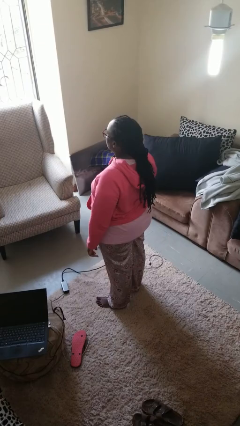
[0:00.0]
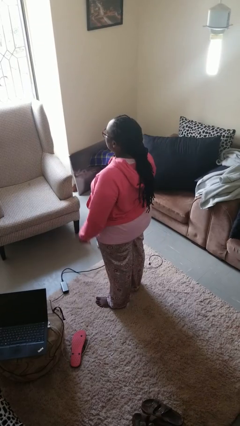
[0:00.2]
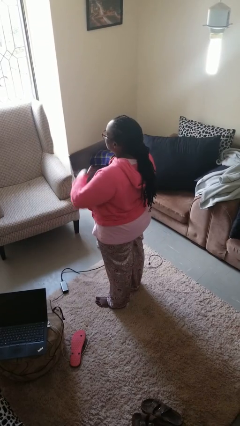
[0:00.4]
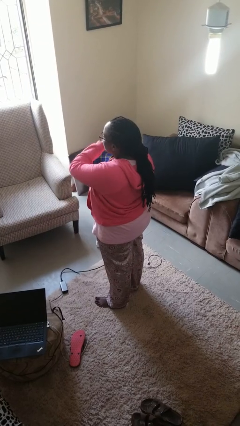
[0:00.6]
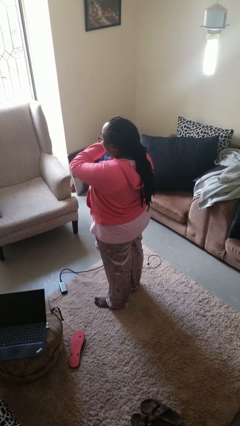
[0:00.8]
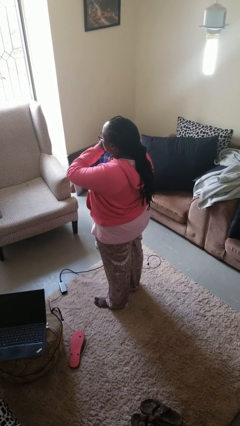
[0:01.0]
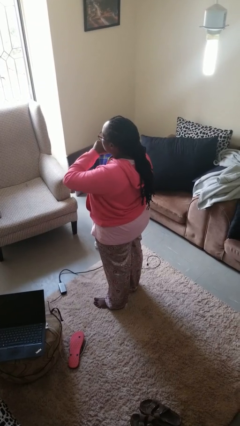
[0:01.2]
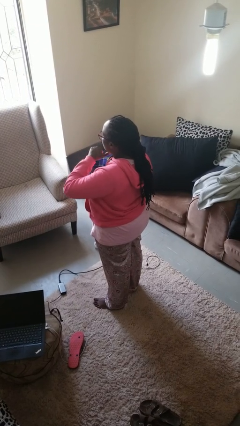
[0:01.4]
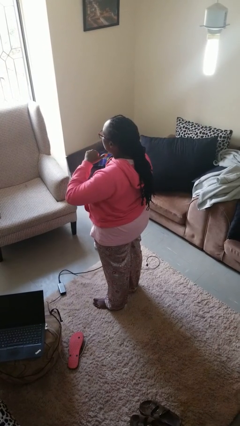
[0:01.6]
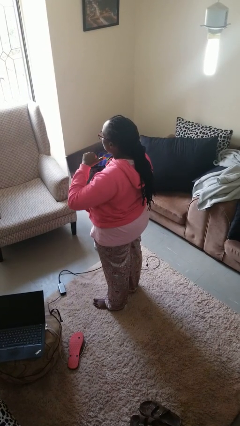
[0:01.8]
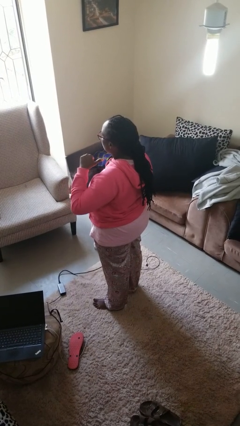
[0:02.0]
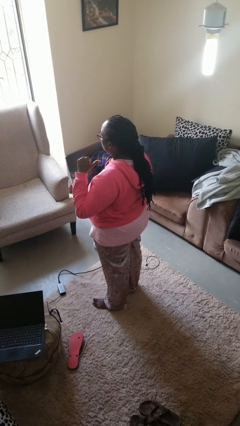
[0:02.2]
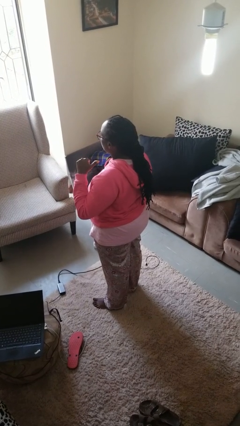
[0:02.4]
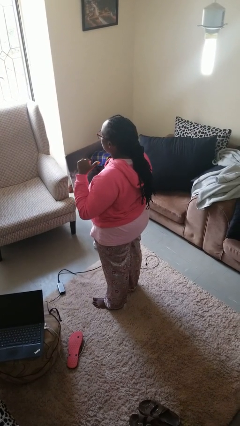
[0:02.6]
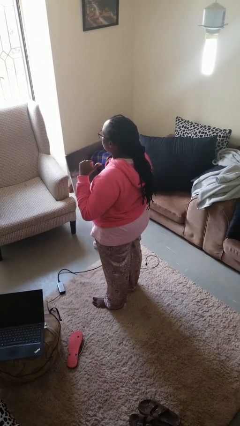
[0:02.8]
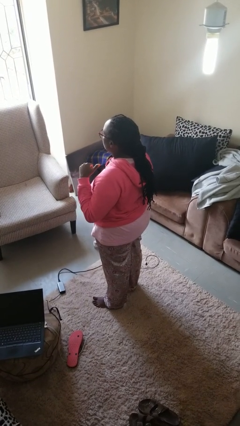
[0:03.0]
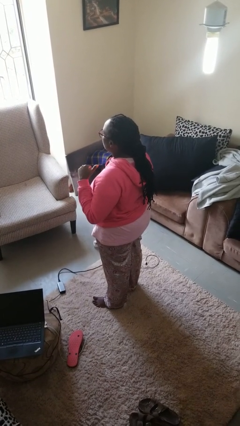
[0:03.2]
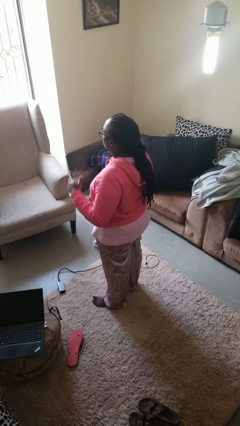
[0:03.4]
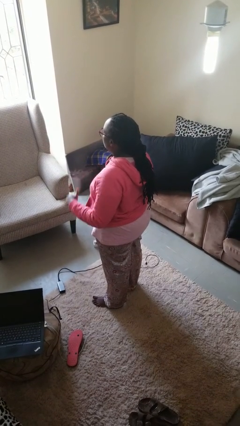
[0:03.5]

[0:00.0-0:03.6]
person gestures cut

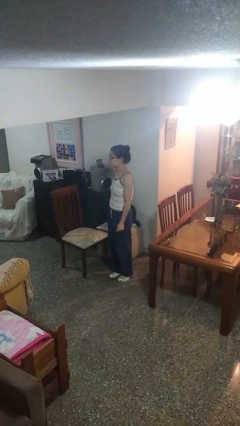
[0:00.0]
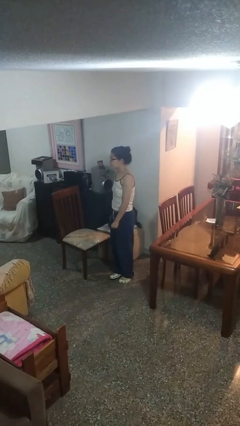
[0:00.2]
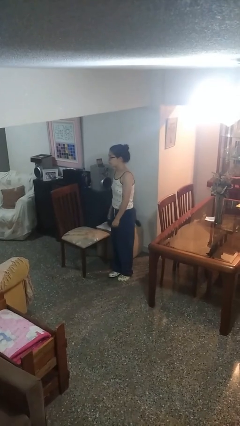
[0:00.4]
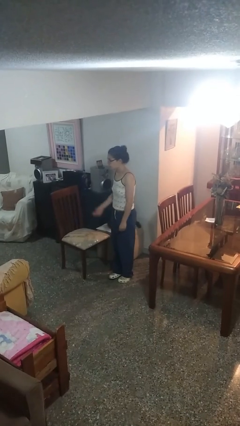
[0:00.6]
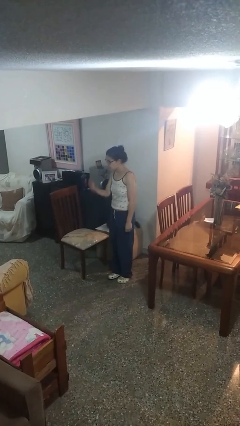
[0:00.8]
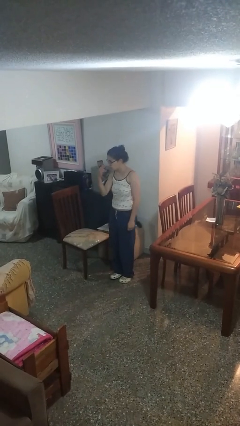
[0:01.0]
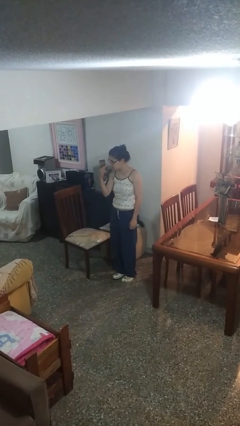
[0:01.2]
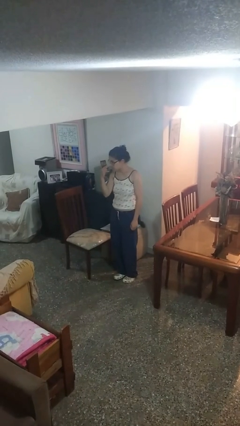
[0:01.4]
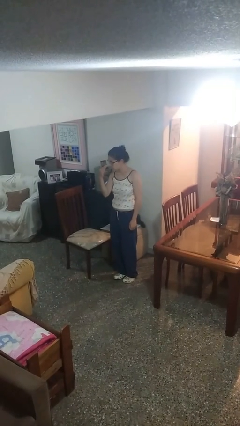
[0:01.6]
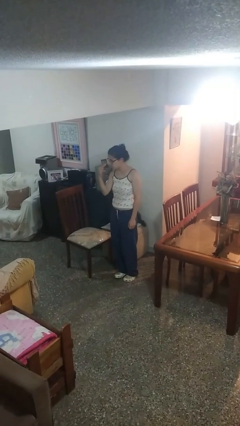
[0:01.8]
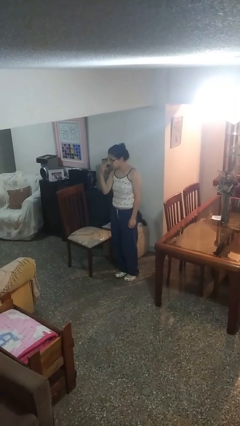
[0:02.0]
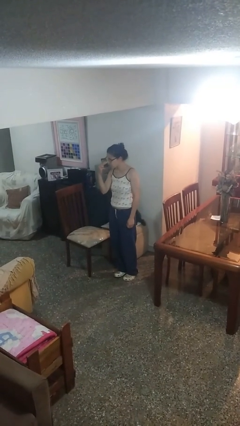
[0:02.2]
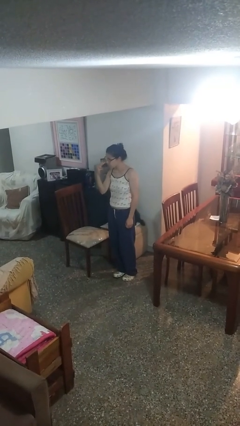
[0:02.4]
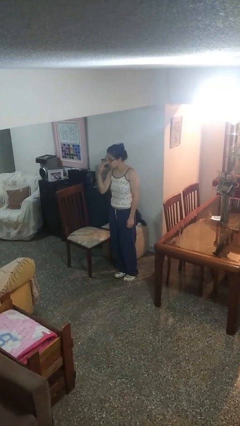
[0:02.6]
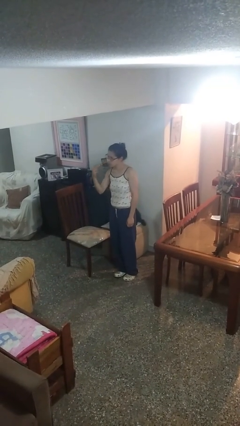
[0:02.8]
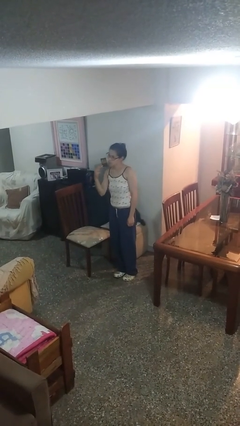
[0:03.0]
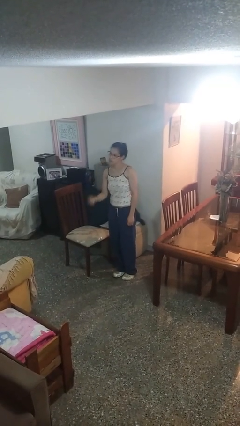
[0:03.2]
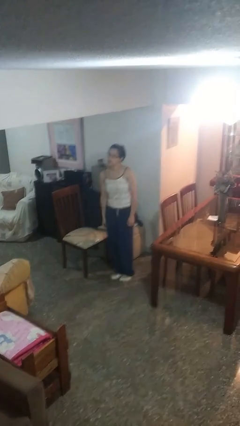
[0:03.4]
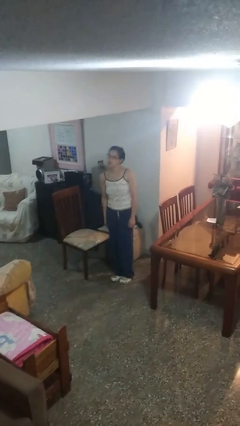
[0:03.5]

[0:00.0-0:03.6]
person gestures watch closely

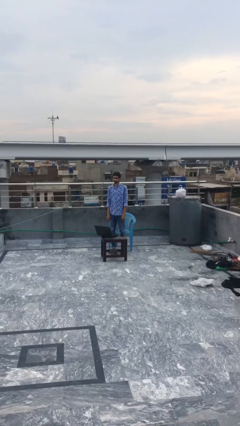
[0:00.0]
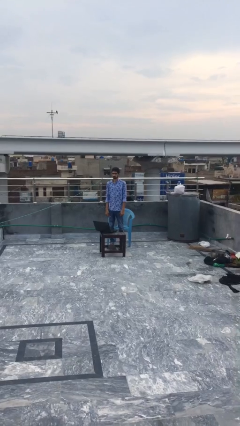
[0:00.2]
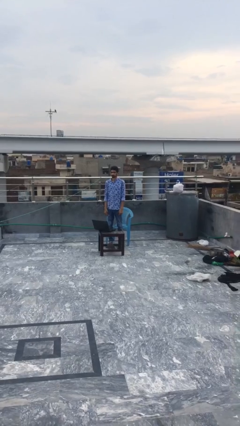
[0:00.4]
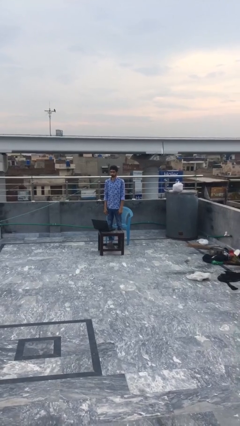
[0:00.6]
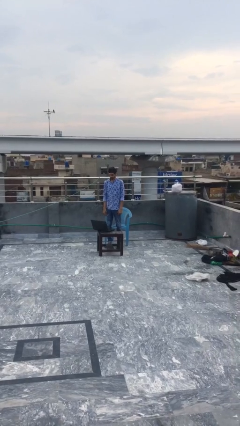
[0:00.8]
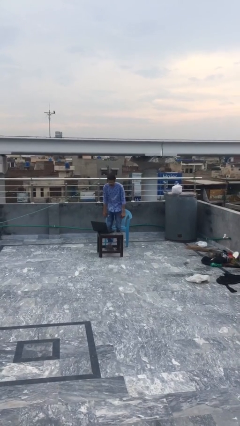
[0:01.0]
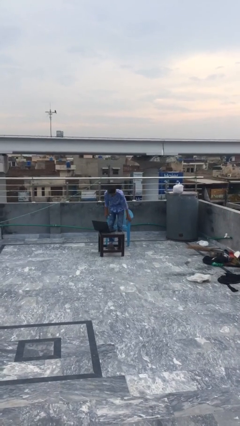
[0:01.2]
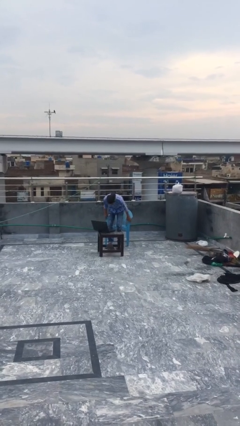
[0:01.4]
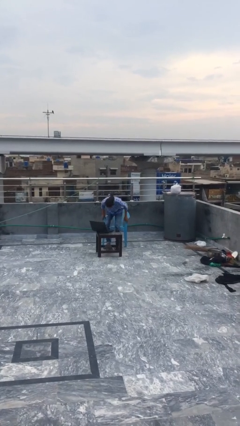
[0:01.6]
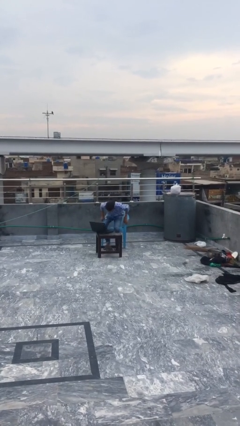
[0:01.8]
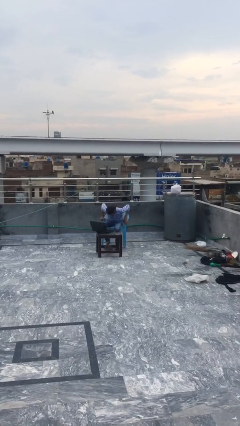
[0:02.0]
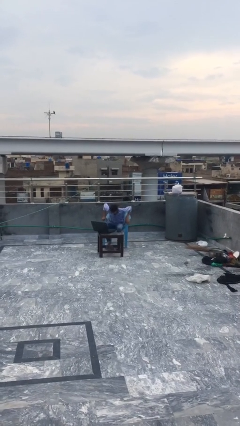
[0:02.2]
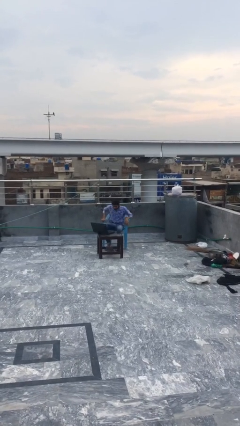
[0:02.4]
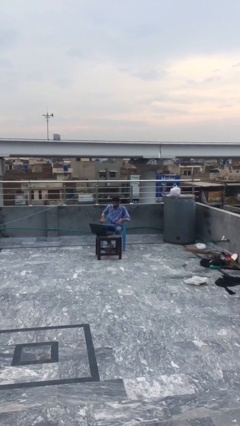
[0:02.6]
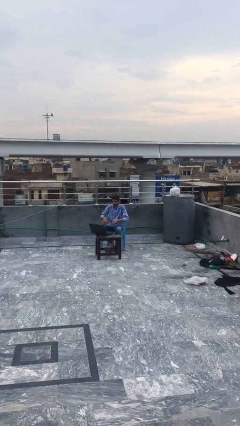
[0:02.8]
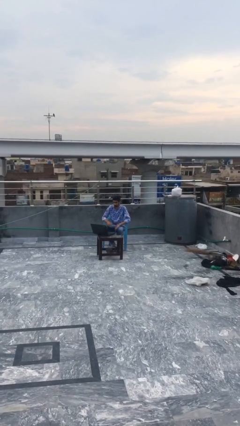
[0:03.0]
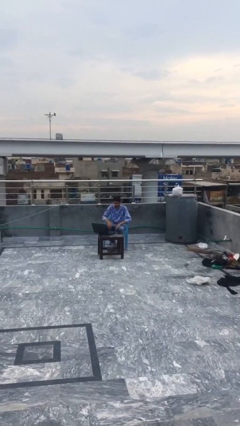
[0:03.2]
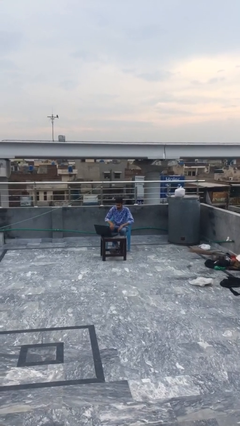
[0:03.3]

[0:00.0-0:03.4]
person sits down

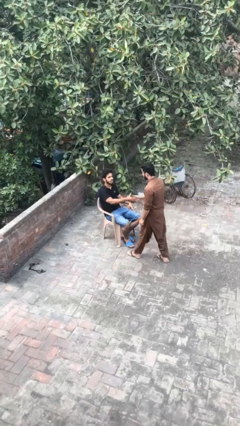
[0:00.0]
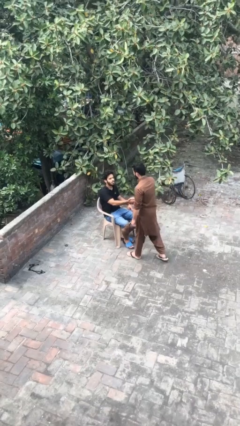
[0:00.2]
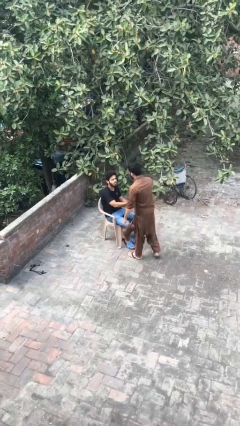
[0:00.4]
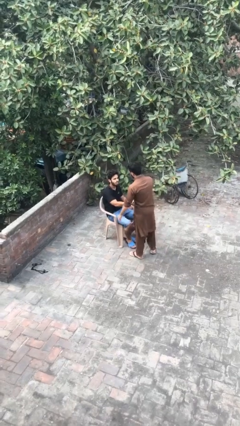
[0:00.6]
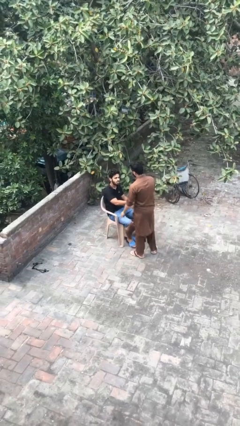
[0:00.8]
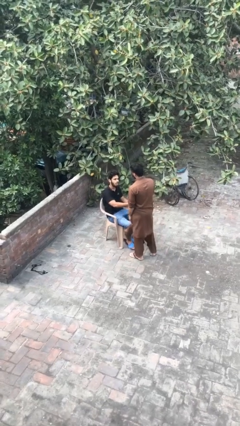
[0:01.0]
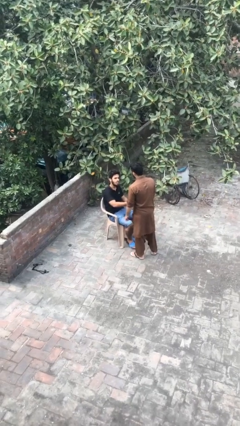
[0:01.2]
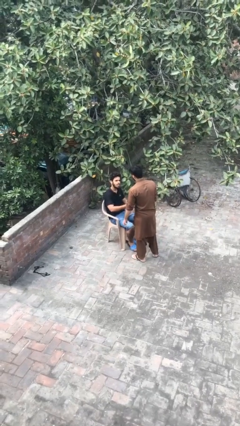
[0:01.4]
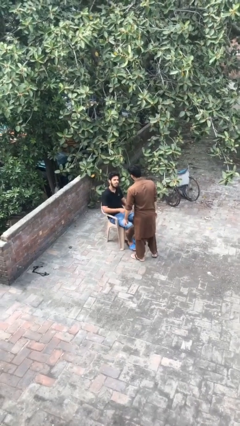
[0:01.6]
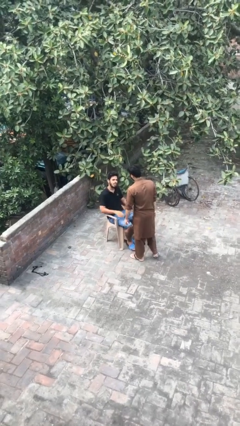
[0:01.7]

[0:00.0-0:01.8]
person shakes hand

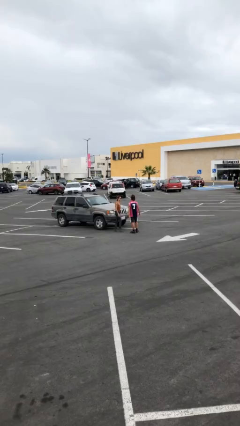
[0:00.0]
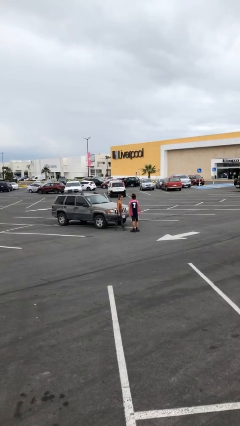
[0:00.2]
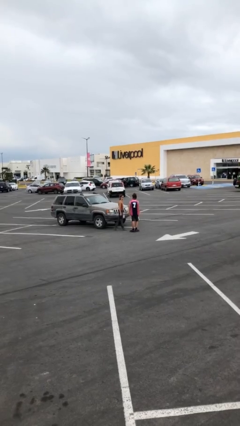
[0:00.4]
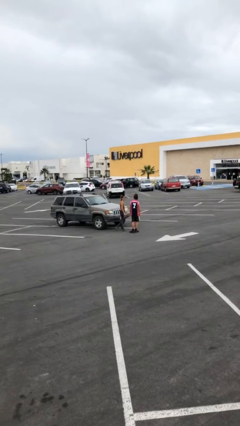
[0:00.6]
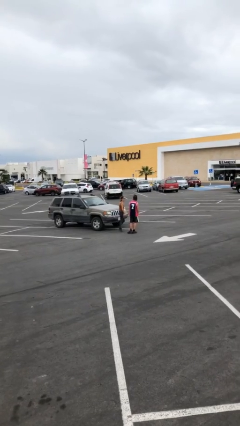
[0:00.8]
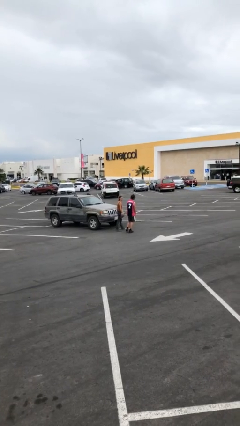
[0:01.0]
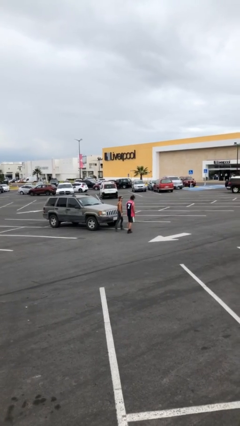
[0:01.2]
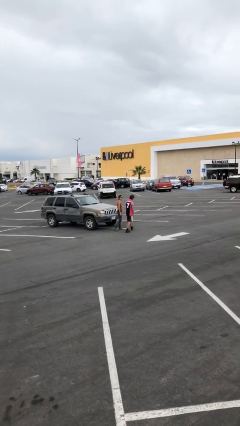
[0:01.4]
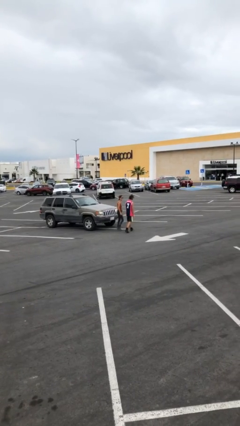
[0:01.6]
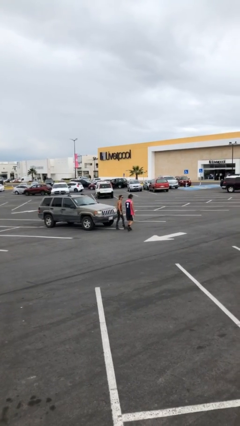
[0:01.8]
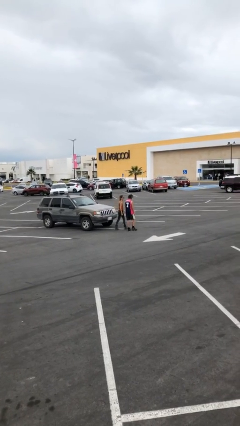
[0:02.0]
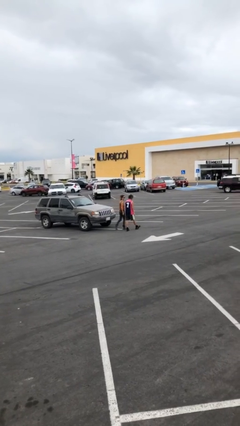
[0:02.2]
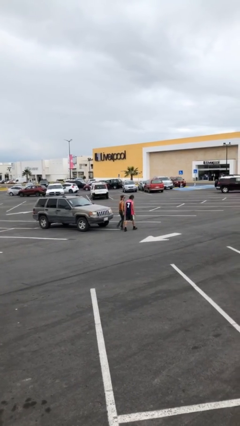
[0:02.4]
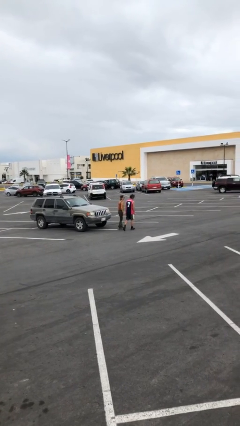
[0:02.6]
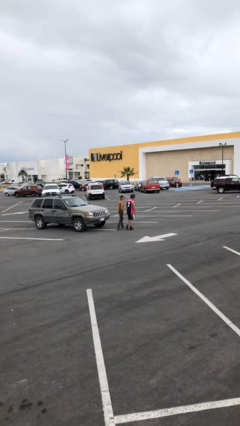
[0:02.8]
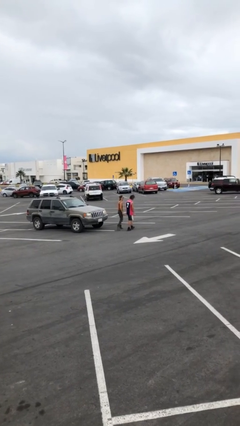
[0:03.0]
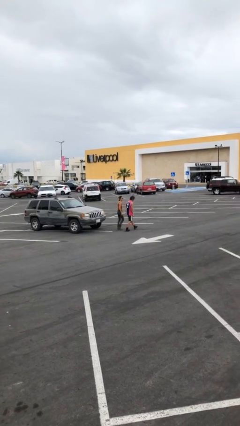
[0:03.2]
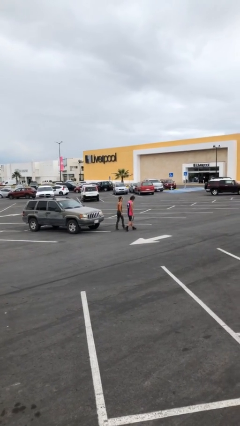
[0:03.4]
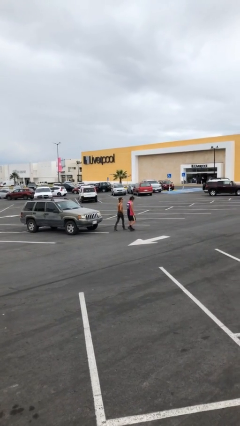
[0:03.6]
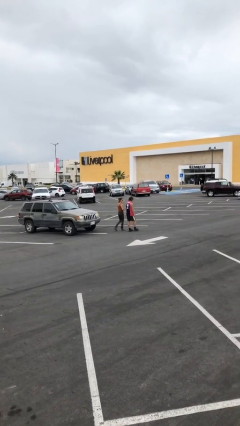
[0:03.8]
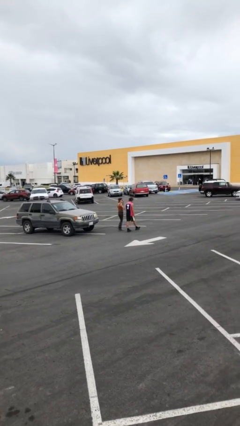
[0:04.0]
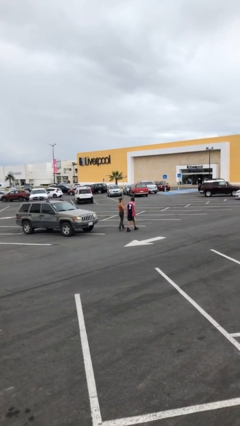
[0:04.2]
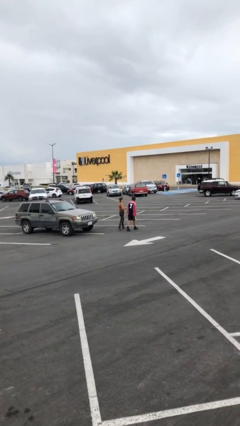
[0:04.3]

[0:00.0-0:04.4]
person talks to person

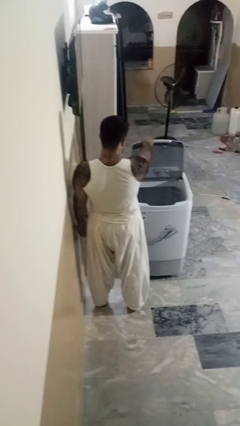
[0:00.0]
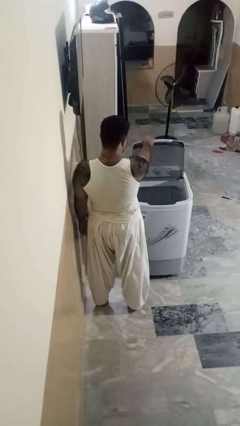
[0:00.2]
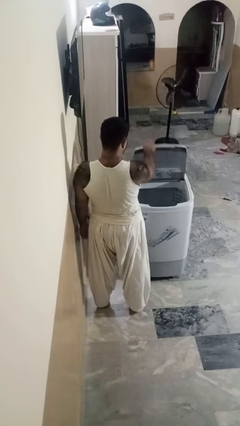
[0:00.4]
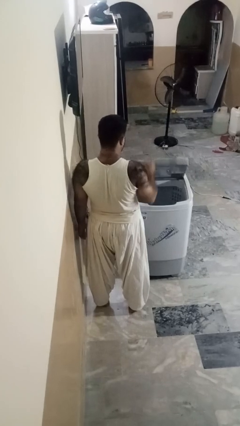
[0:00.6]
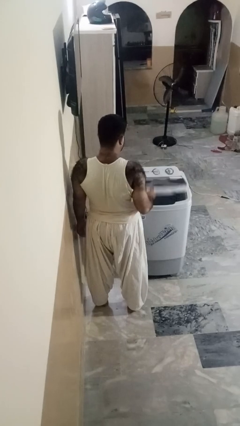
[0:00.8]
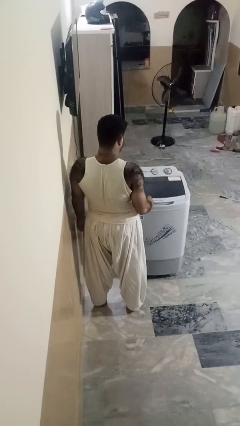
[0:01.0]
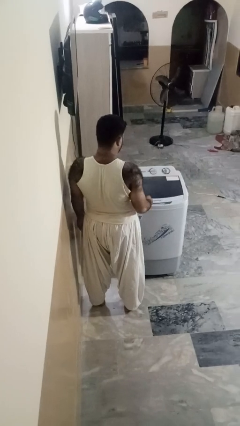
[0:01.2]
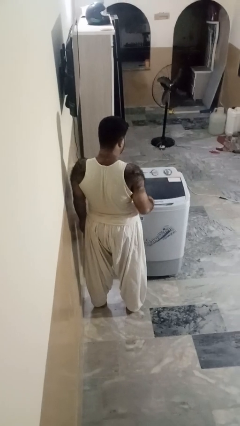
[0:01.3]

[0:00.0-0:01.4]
person closes clothes washer
